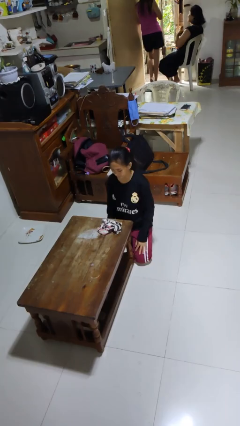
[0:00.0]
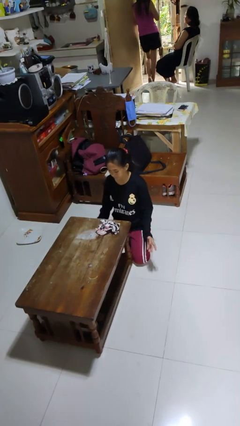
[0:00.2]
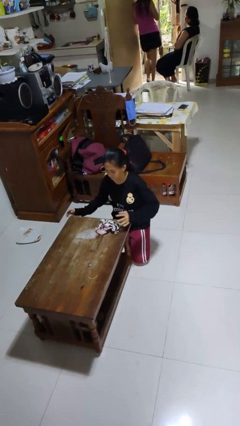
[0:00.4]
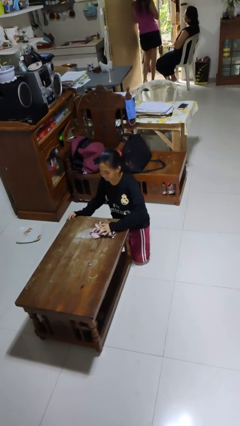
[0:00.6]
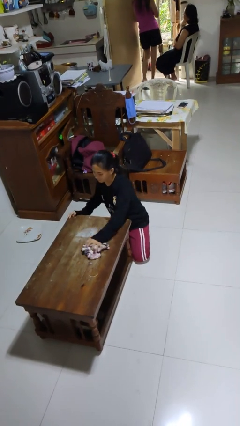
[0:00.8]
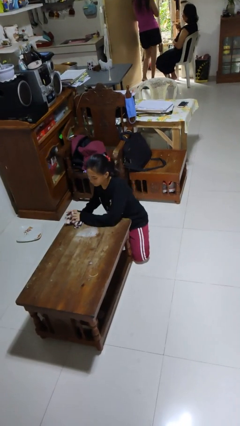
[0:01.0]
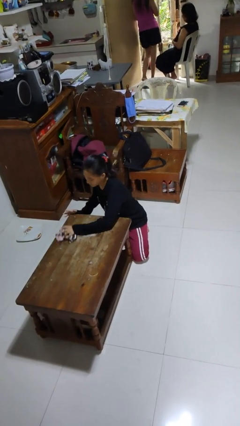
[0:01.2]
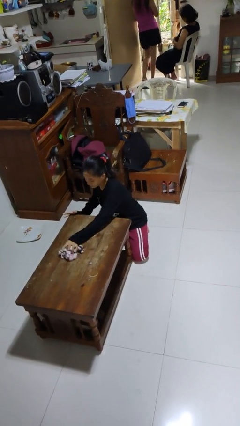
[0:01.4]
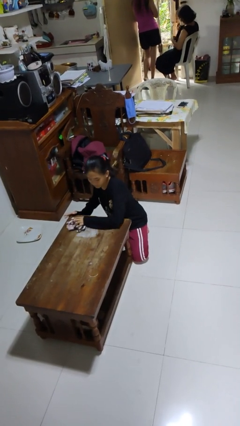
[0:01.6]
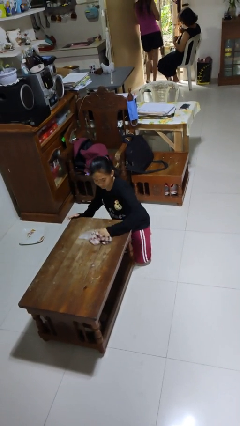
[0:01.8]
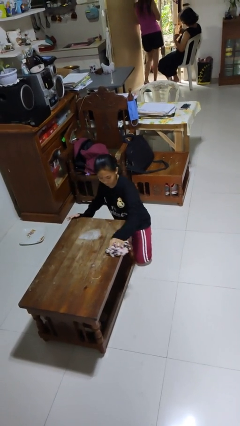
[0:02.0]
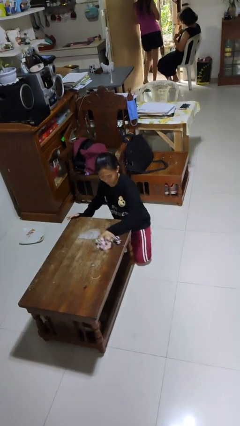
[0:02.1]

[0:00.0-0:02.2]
person cleans table with rag

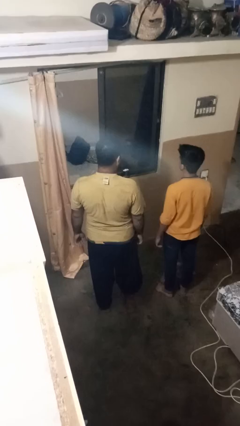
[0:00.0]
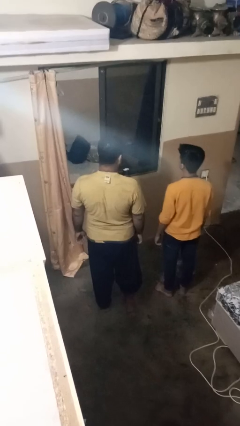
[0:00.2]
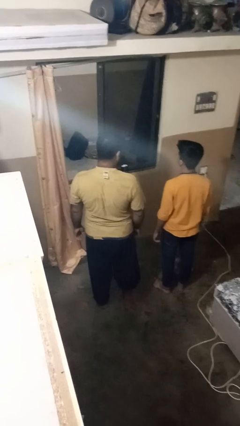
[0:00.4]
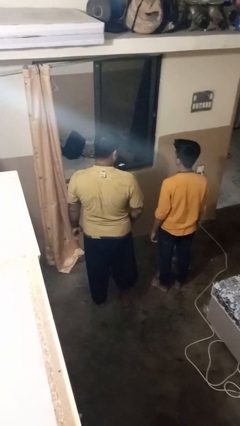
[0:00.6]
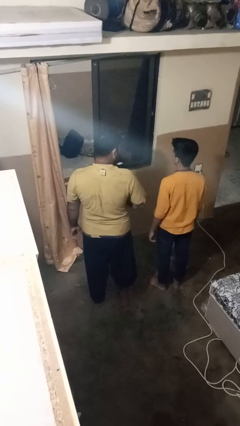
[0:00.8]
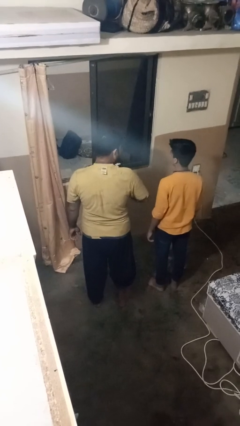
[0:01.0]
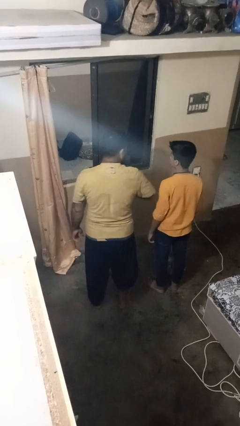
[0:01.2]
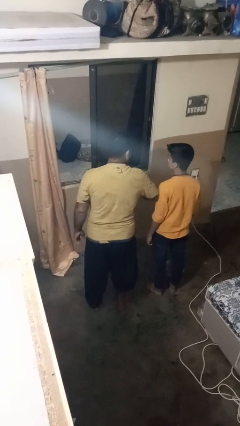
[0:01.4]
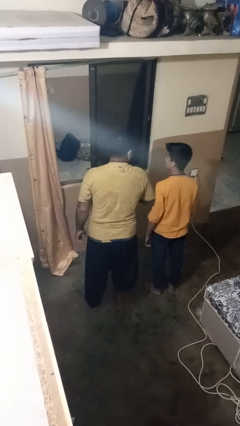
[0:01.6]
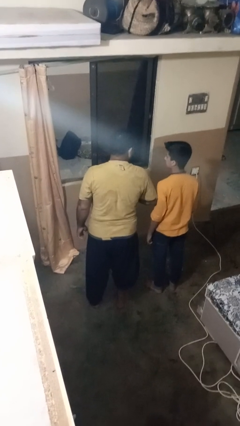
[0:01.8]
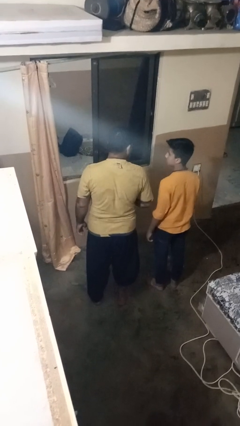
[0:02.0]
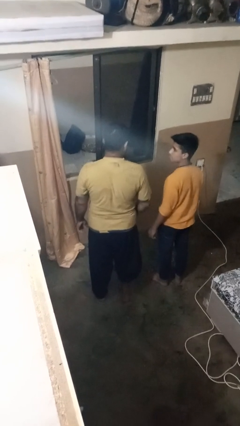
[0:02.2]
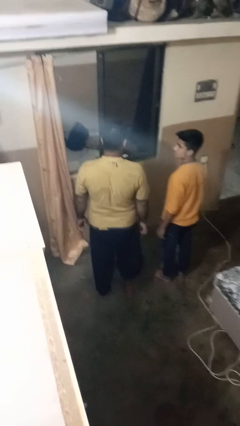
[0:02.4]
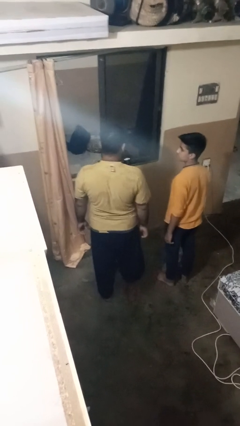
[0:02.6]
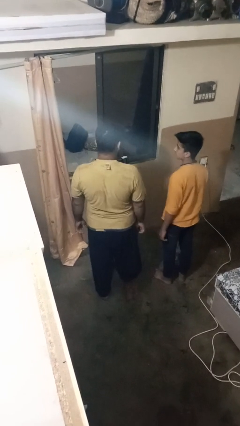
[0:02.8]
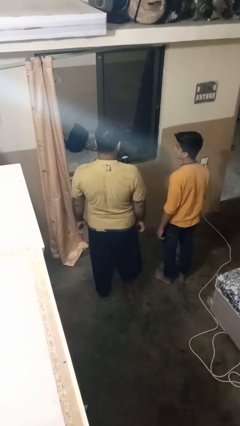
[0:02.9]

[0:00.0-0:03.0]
person nudges person with elbow

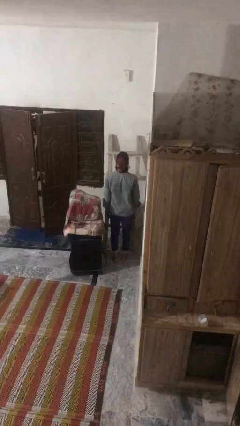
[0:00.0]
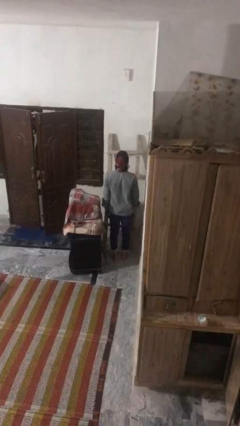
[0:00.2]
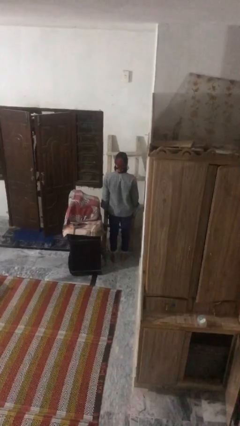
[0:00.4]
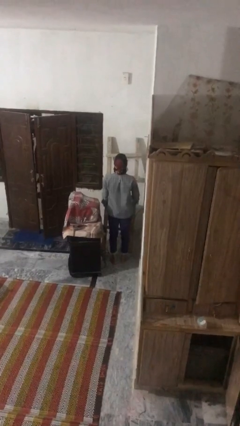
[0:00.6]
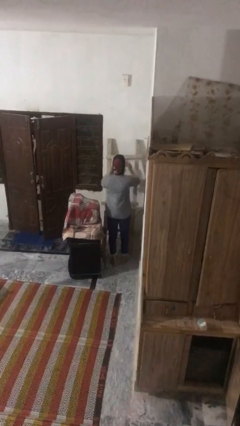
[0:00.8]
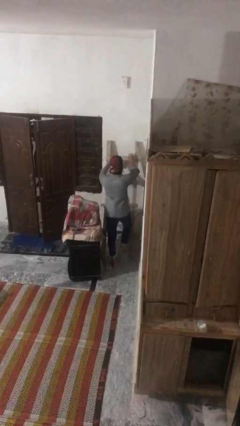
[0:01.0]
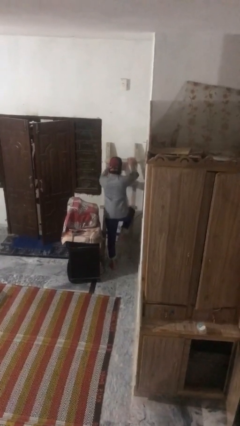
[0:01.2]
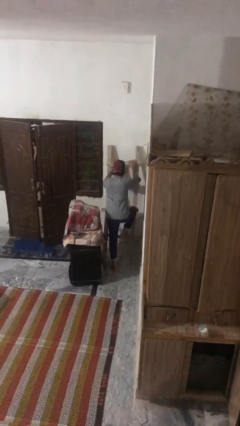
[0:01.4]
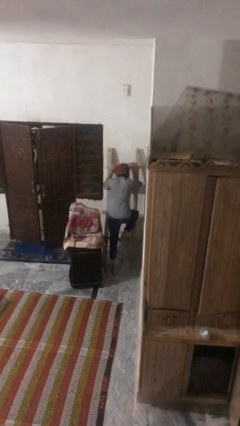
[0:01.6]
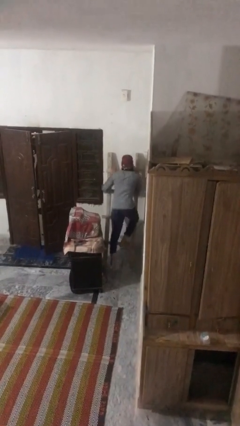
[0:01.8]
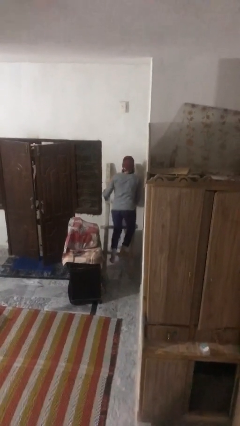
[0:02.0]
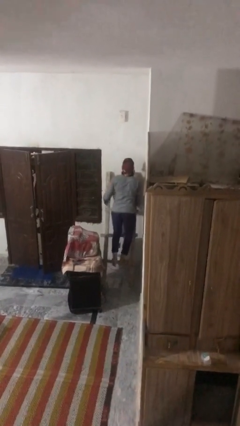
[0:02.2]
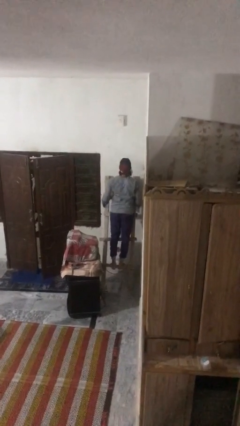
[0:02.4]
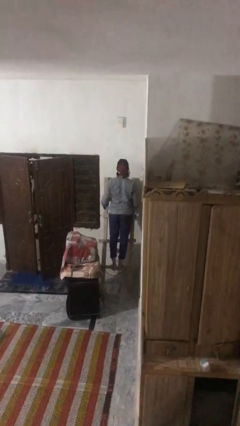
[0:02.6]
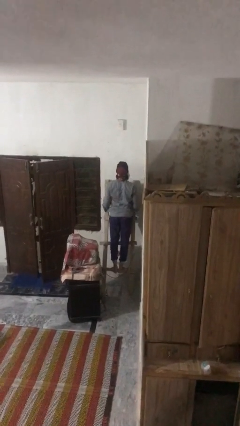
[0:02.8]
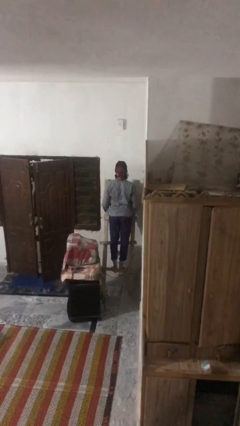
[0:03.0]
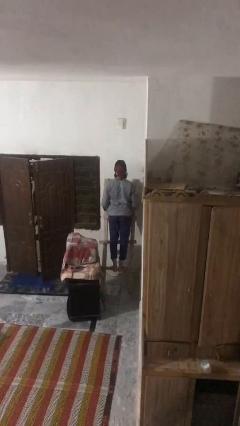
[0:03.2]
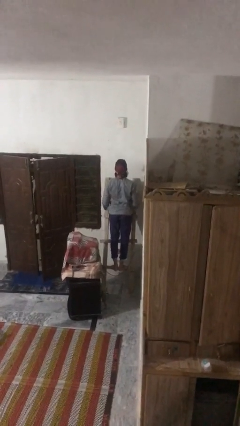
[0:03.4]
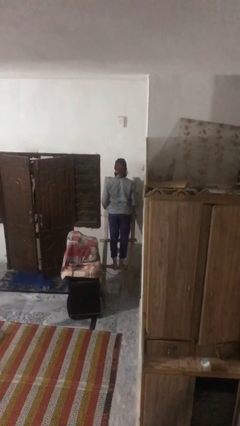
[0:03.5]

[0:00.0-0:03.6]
person climbs up ladder

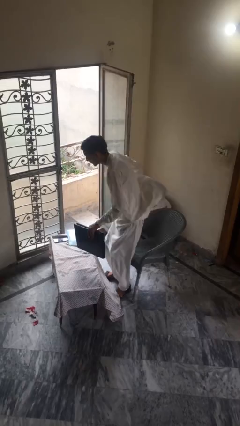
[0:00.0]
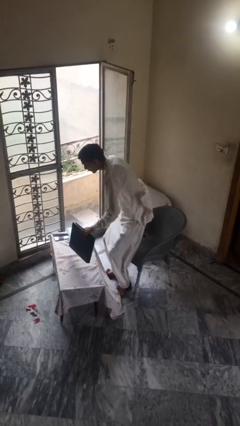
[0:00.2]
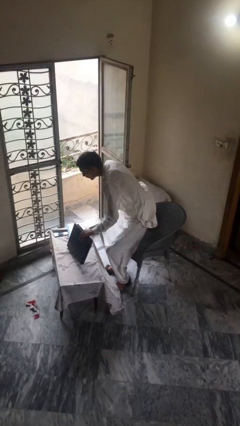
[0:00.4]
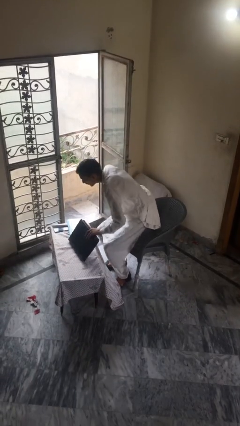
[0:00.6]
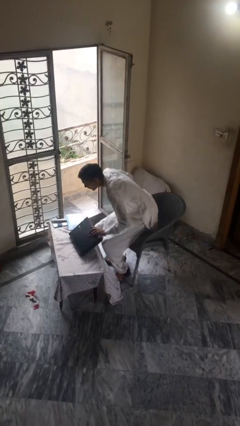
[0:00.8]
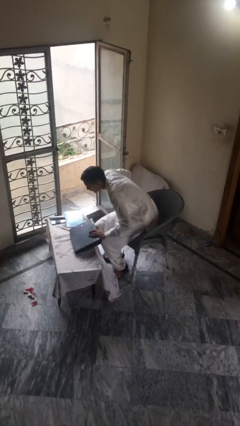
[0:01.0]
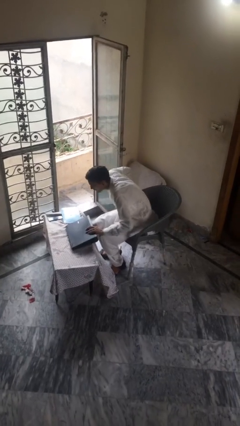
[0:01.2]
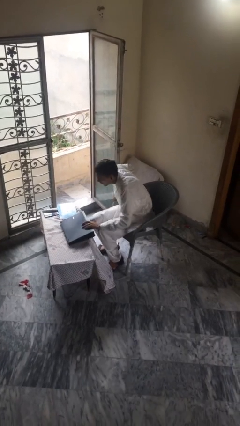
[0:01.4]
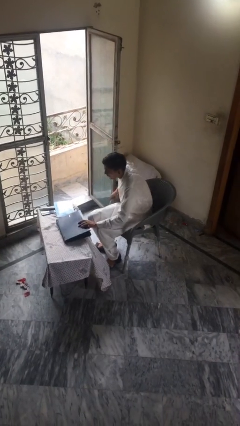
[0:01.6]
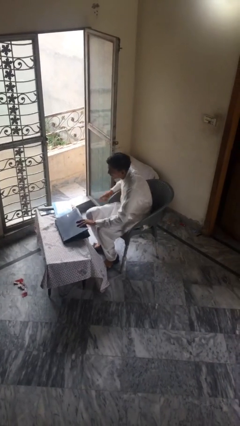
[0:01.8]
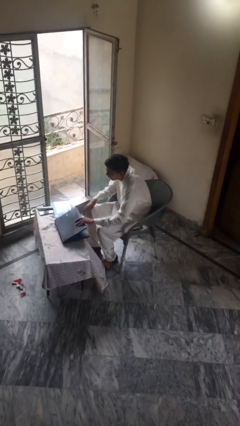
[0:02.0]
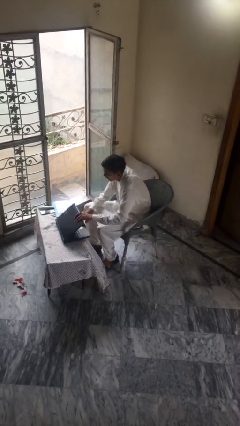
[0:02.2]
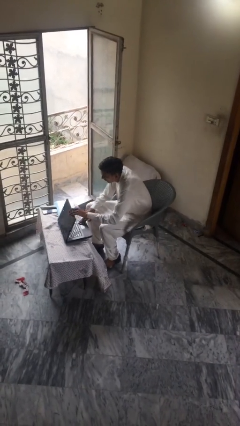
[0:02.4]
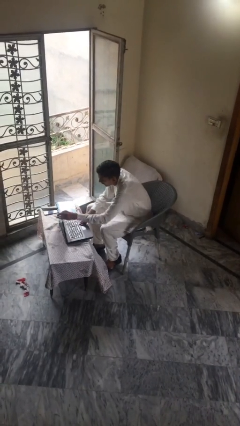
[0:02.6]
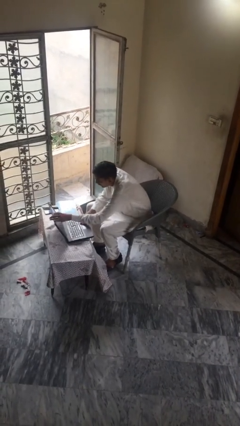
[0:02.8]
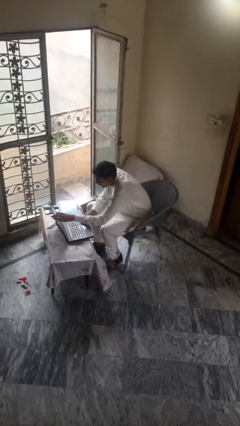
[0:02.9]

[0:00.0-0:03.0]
person sits down

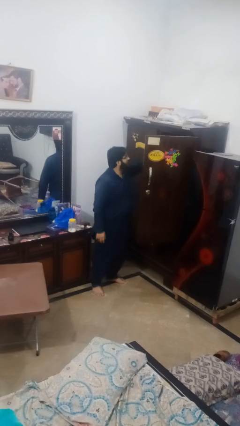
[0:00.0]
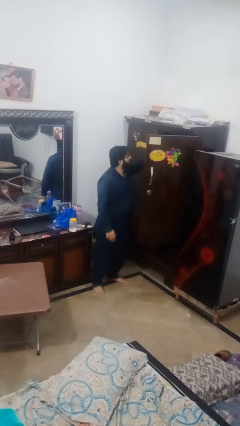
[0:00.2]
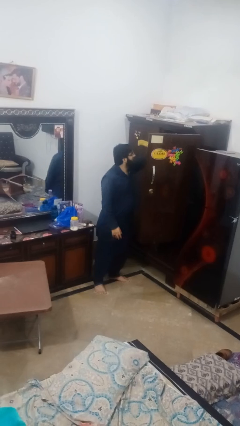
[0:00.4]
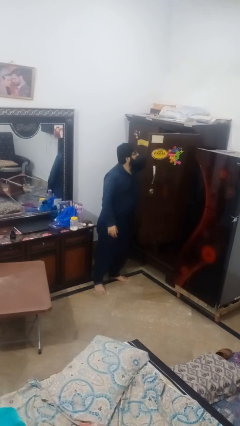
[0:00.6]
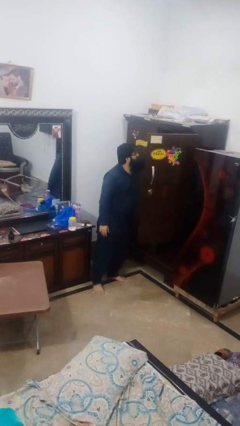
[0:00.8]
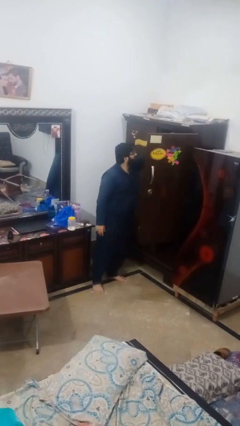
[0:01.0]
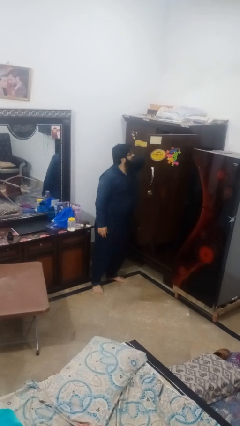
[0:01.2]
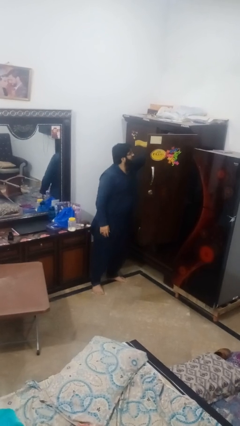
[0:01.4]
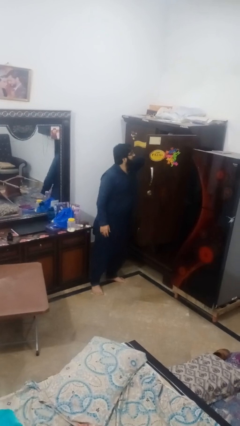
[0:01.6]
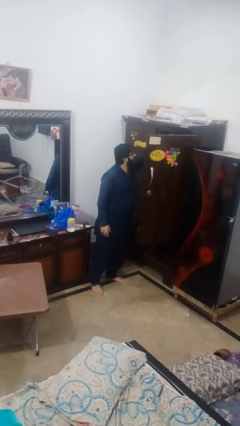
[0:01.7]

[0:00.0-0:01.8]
person takes clothes from closet

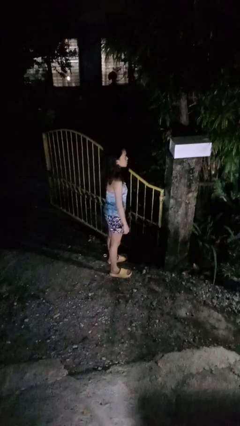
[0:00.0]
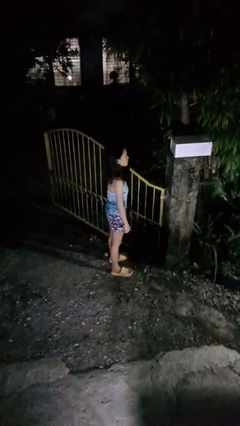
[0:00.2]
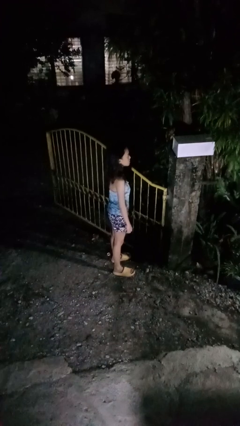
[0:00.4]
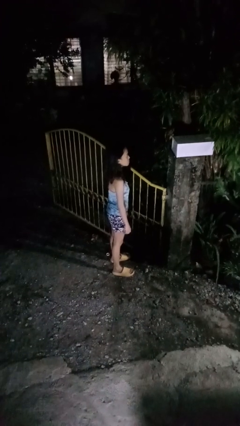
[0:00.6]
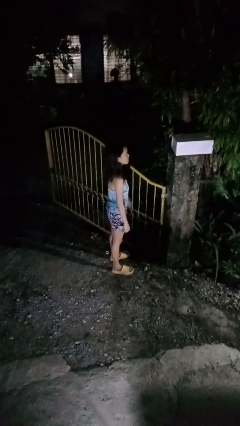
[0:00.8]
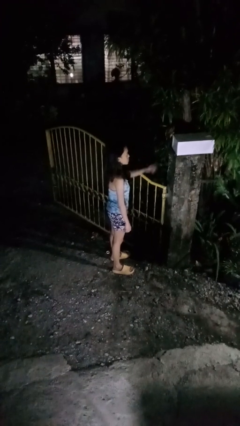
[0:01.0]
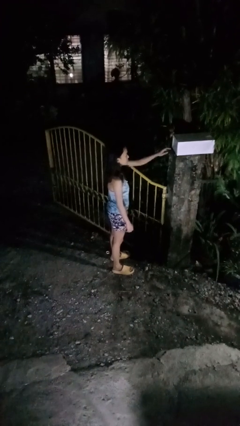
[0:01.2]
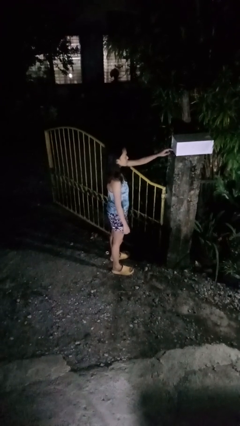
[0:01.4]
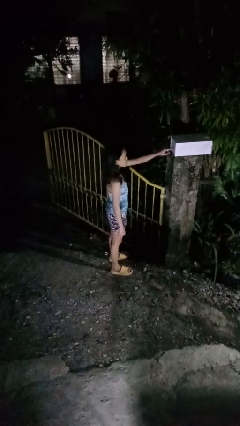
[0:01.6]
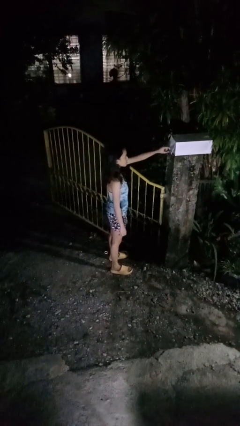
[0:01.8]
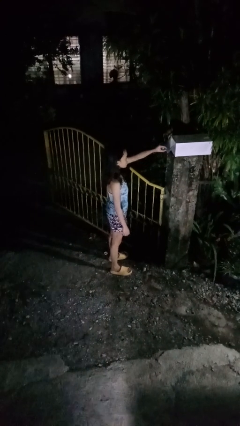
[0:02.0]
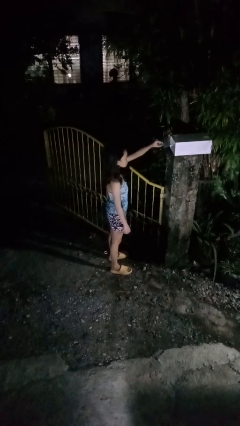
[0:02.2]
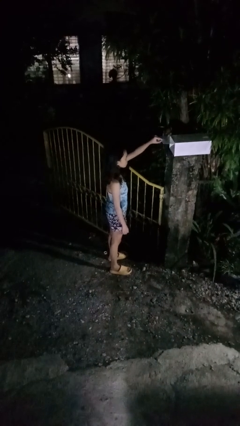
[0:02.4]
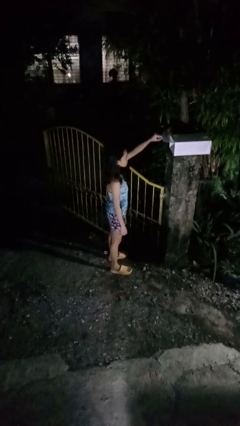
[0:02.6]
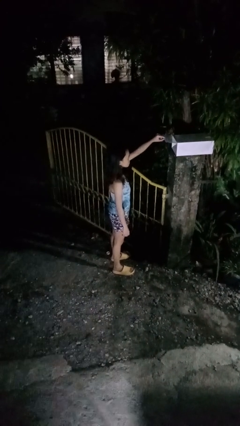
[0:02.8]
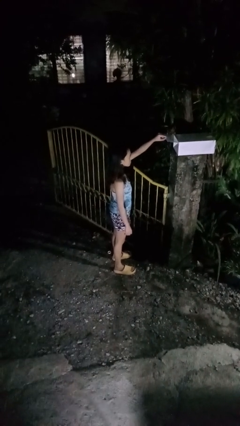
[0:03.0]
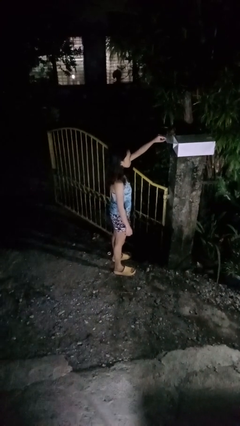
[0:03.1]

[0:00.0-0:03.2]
person opens mailbox
